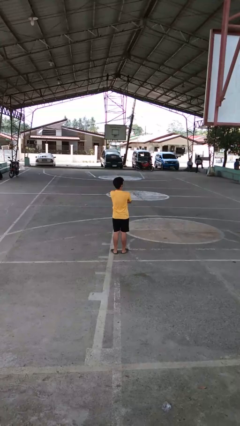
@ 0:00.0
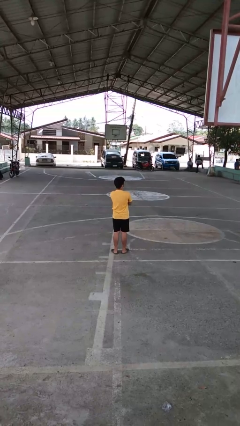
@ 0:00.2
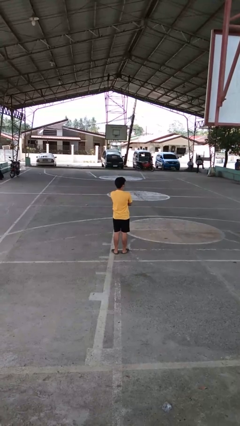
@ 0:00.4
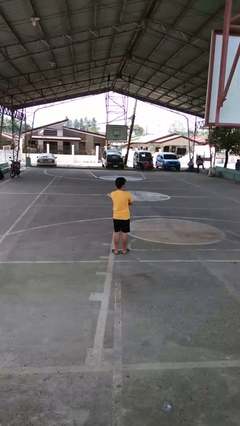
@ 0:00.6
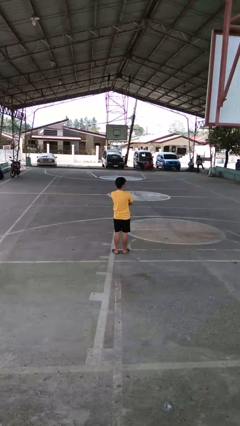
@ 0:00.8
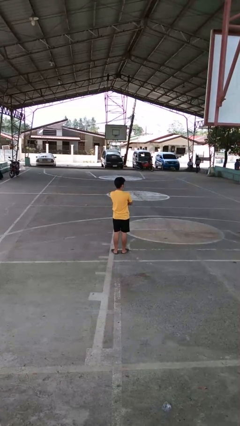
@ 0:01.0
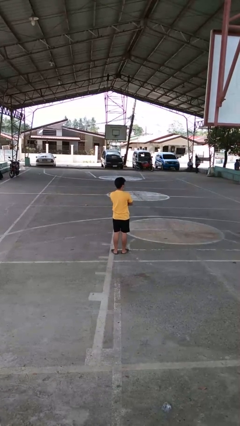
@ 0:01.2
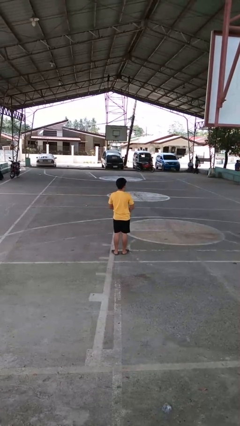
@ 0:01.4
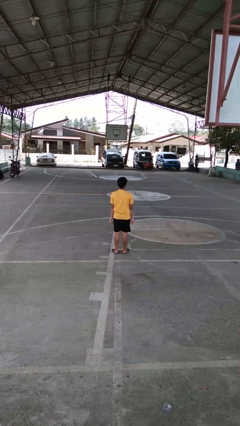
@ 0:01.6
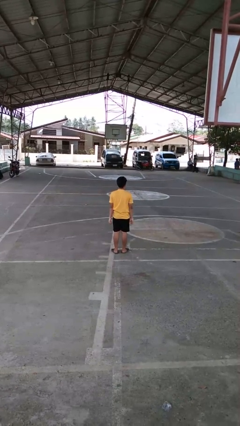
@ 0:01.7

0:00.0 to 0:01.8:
person crosses arms

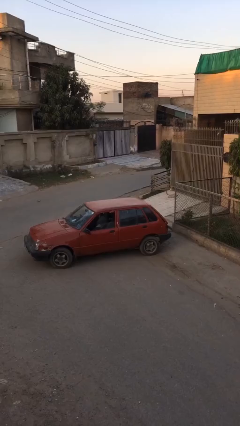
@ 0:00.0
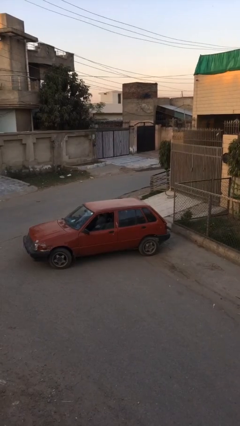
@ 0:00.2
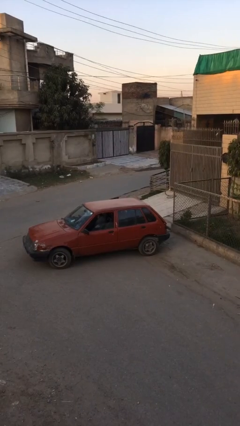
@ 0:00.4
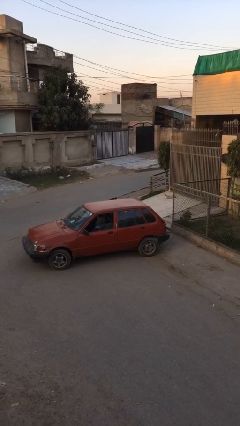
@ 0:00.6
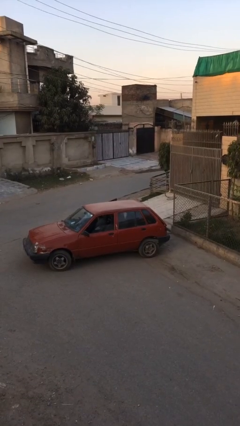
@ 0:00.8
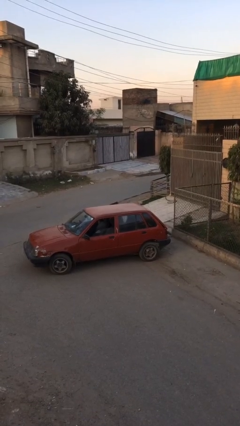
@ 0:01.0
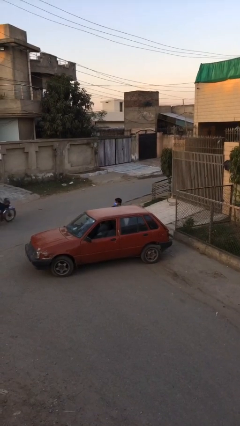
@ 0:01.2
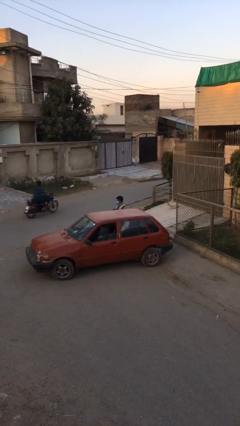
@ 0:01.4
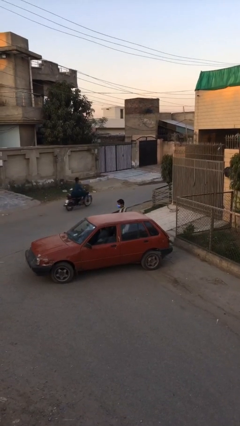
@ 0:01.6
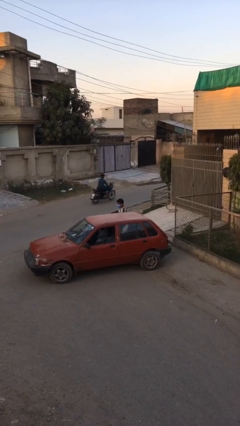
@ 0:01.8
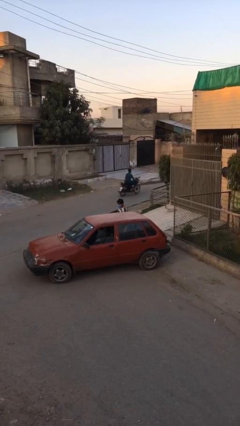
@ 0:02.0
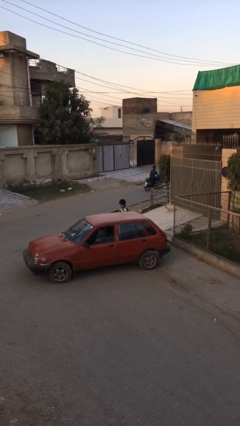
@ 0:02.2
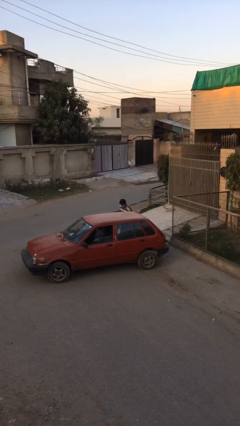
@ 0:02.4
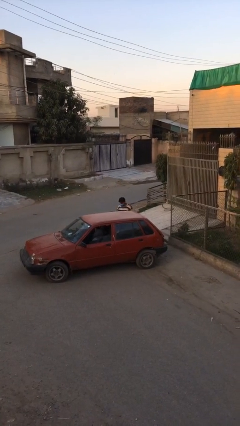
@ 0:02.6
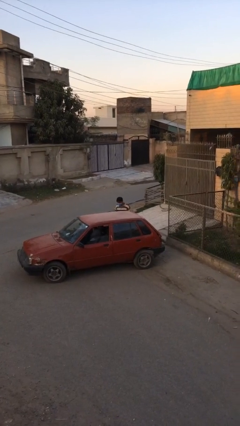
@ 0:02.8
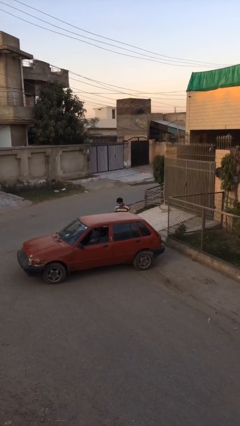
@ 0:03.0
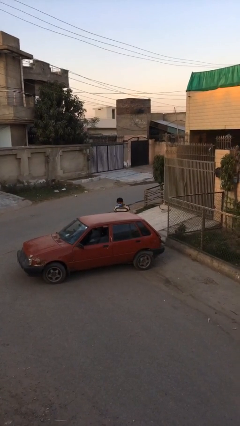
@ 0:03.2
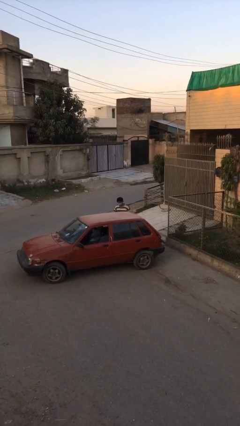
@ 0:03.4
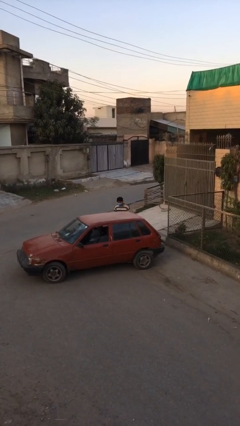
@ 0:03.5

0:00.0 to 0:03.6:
person exits car

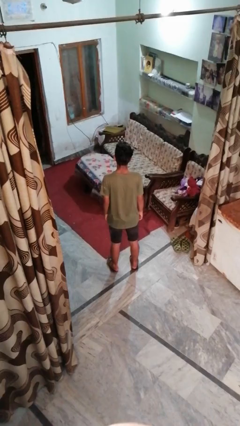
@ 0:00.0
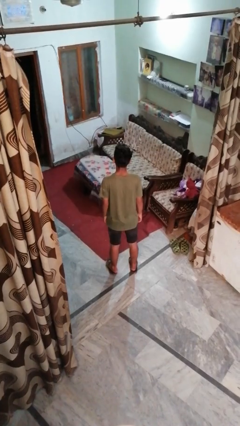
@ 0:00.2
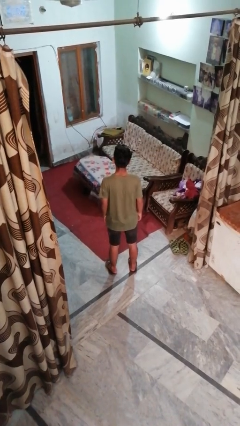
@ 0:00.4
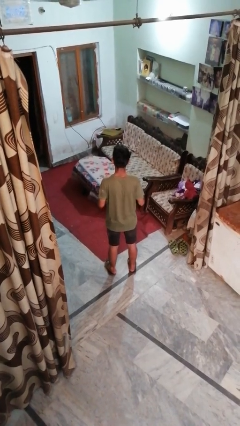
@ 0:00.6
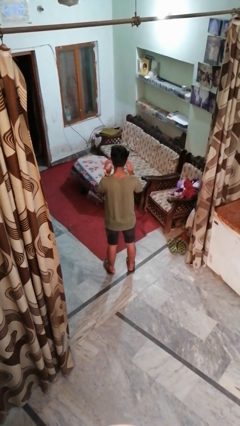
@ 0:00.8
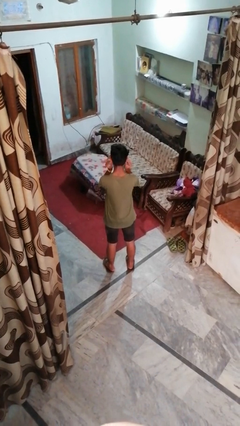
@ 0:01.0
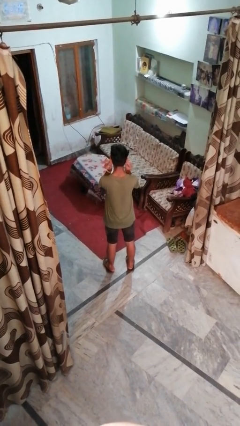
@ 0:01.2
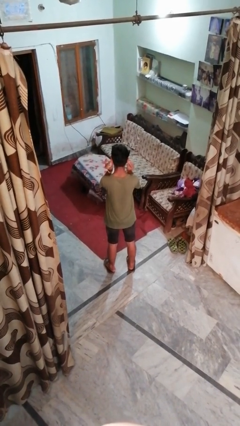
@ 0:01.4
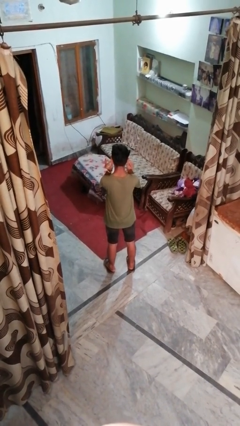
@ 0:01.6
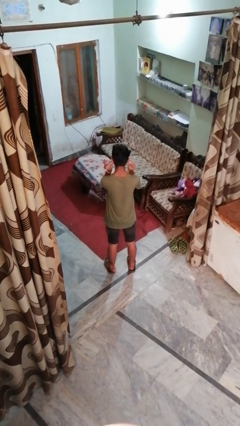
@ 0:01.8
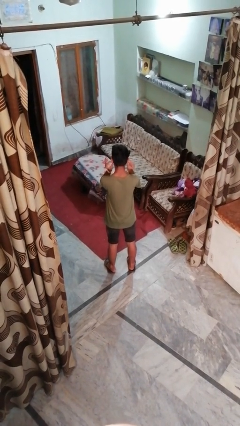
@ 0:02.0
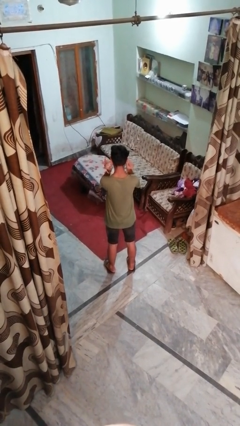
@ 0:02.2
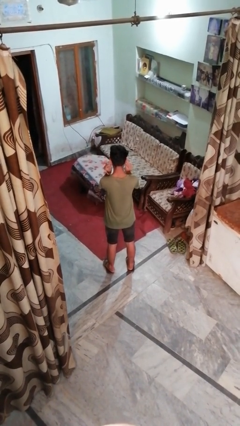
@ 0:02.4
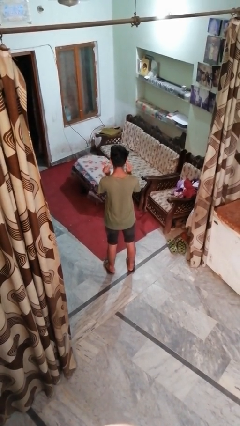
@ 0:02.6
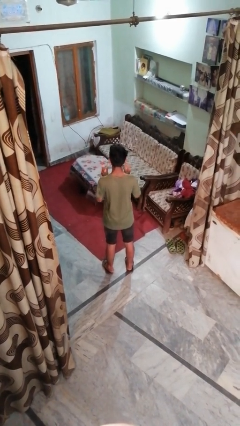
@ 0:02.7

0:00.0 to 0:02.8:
person touches earlobe

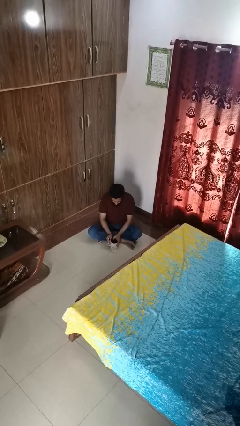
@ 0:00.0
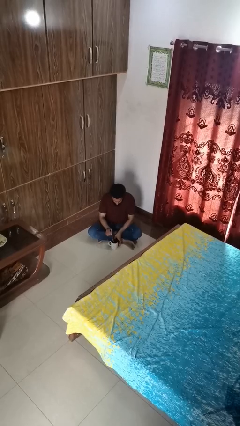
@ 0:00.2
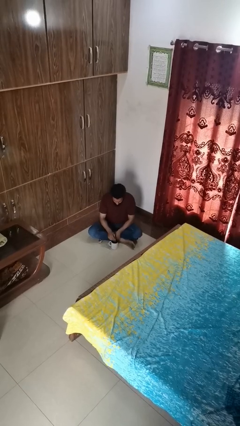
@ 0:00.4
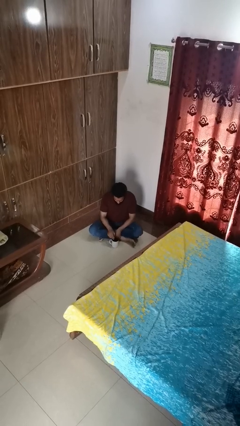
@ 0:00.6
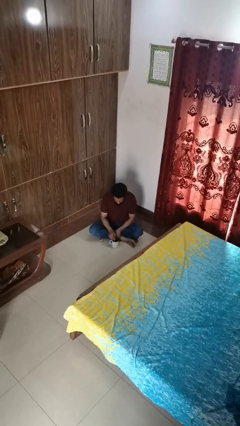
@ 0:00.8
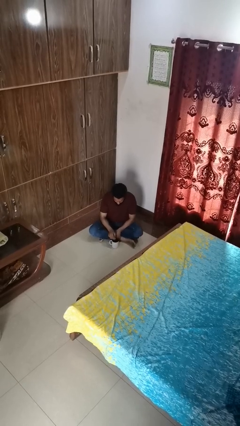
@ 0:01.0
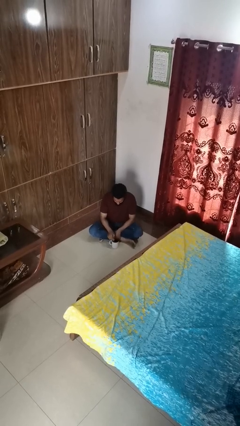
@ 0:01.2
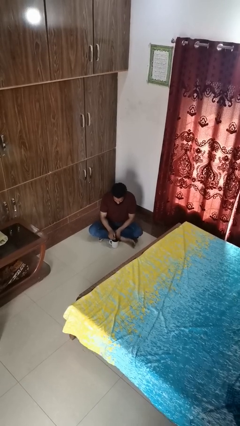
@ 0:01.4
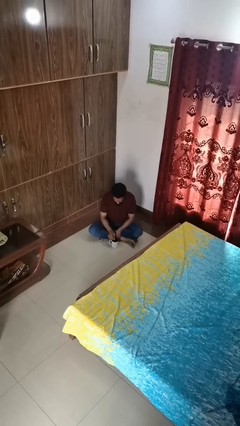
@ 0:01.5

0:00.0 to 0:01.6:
person stirs mug

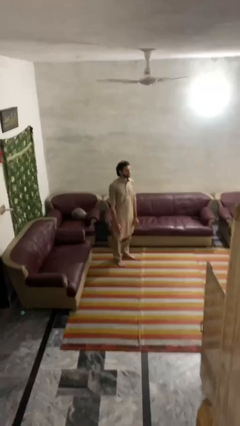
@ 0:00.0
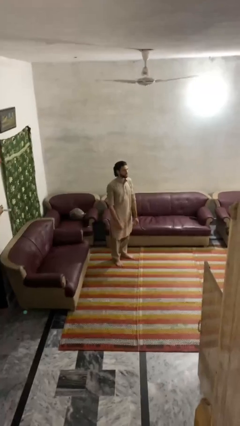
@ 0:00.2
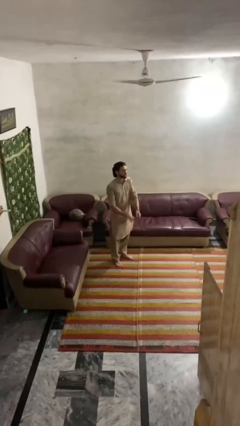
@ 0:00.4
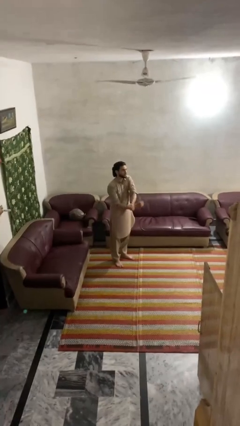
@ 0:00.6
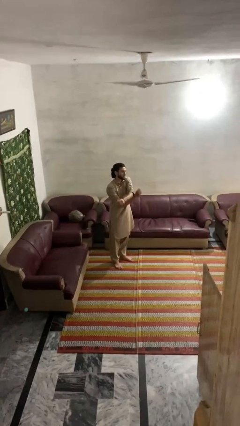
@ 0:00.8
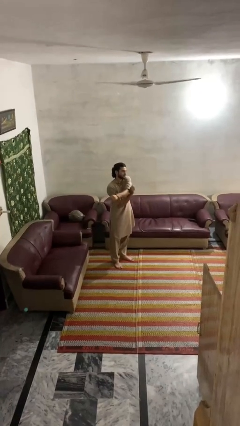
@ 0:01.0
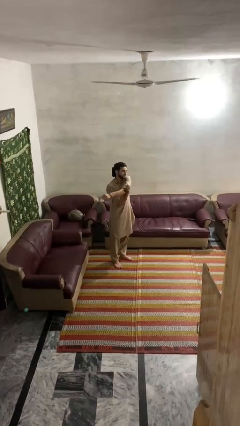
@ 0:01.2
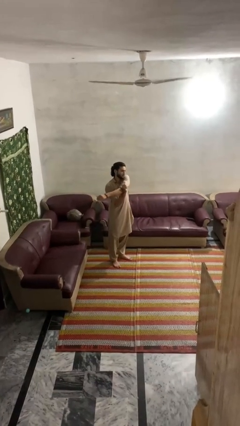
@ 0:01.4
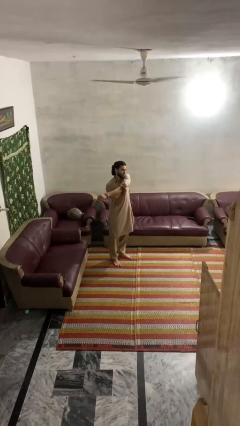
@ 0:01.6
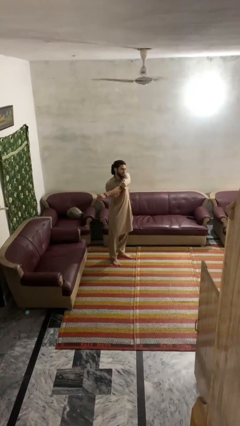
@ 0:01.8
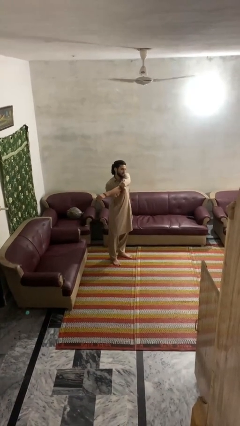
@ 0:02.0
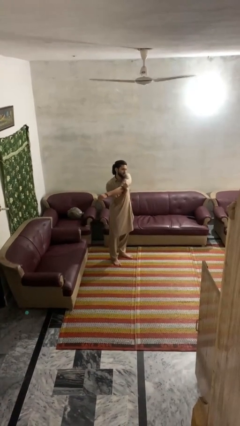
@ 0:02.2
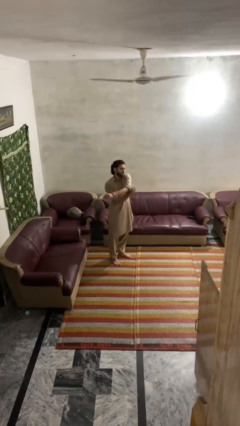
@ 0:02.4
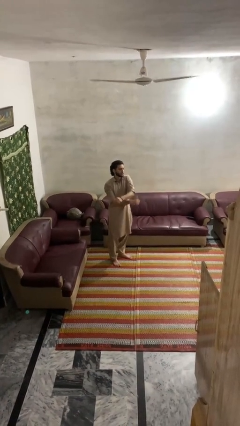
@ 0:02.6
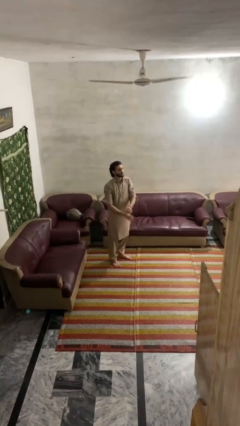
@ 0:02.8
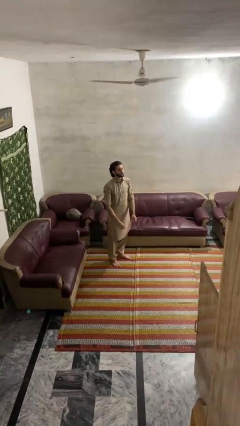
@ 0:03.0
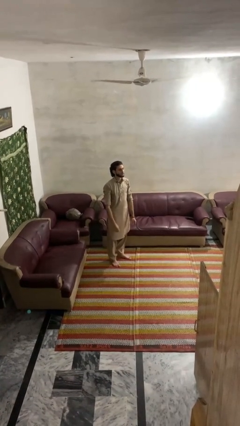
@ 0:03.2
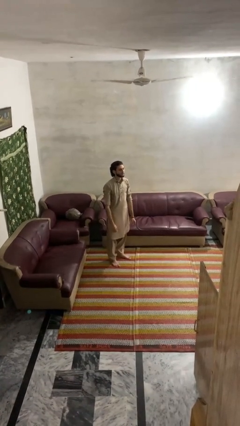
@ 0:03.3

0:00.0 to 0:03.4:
person stretches arms to side

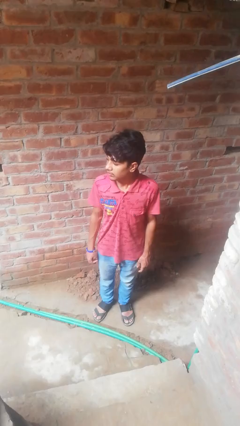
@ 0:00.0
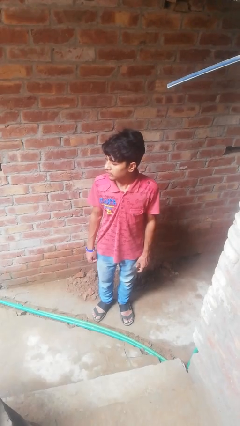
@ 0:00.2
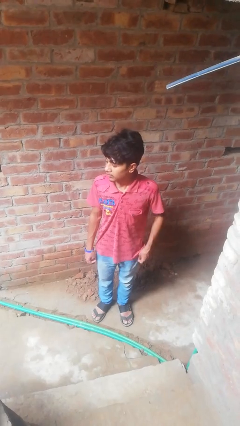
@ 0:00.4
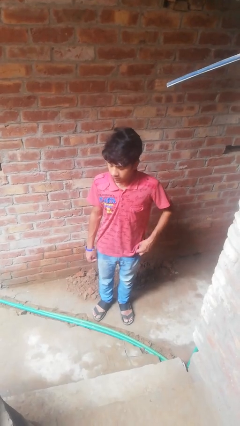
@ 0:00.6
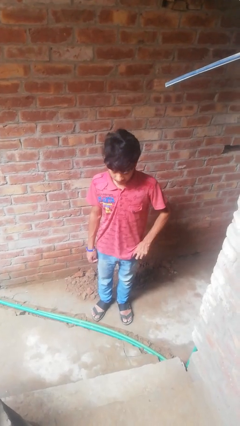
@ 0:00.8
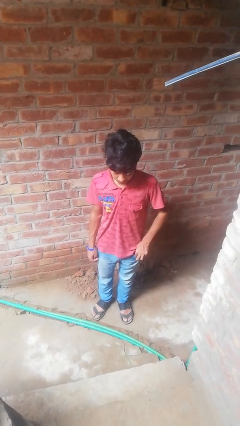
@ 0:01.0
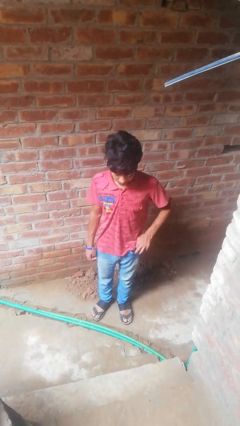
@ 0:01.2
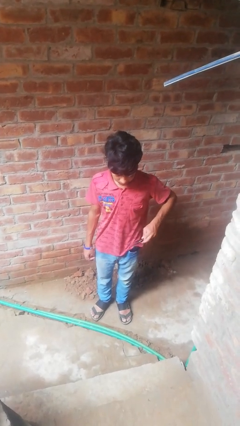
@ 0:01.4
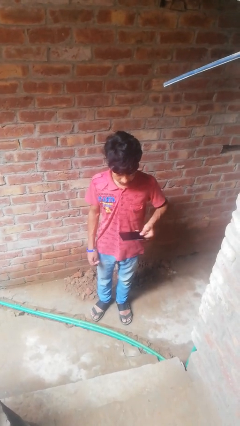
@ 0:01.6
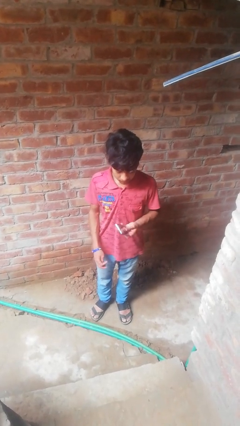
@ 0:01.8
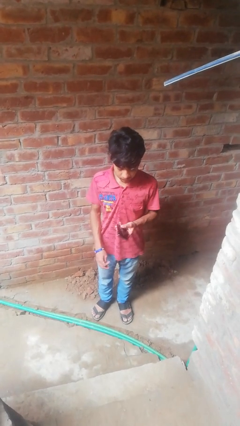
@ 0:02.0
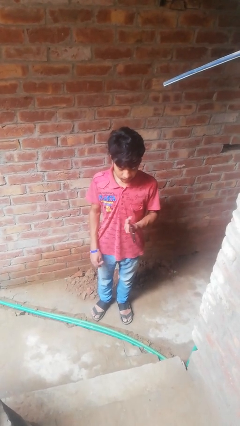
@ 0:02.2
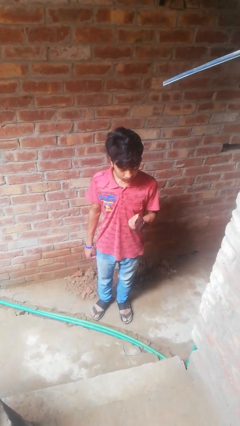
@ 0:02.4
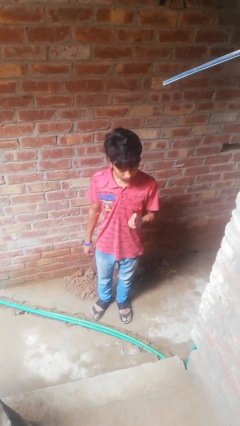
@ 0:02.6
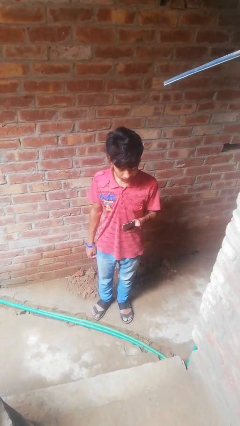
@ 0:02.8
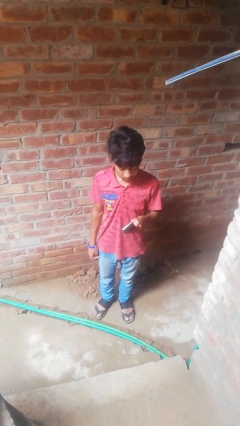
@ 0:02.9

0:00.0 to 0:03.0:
person takes phone from pocket

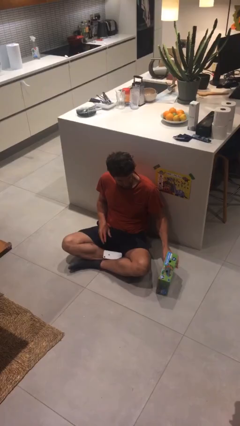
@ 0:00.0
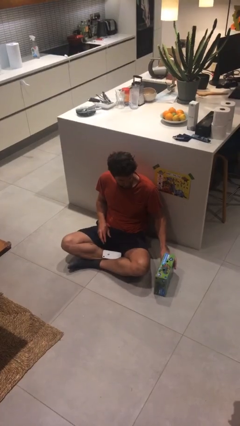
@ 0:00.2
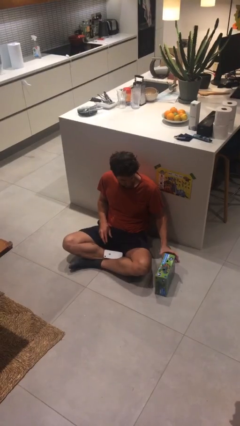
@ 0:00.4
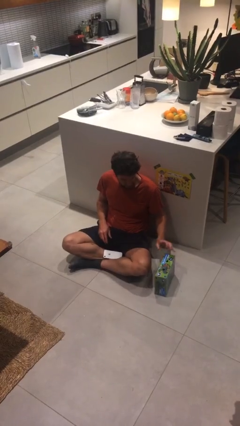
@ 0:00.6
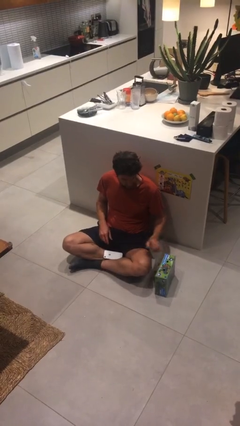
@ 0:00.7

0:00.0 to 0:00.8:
person puts down object on floor
